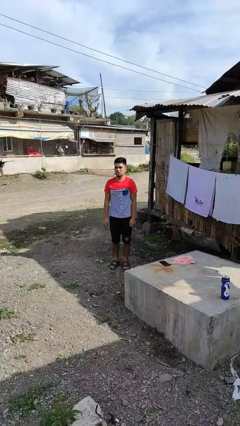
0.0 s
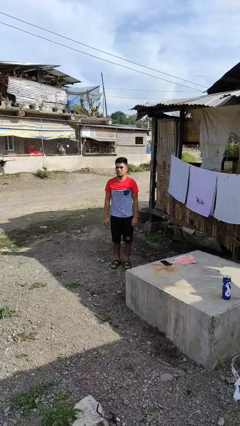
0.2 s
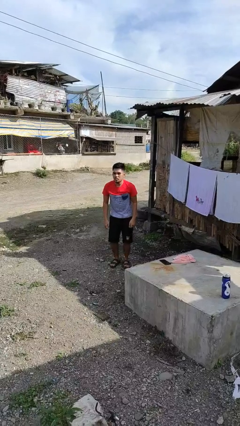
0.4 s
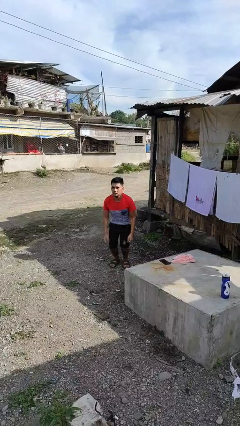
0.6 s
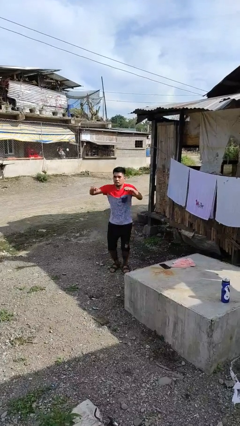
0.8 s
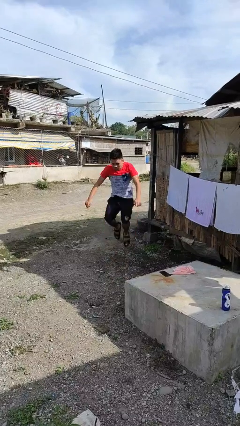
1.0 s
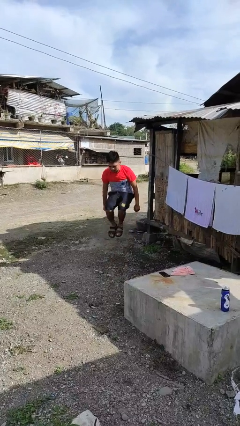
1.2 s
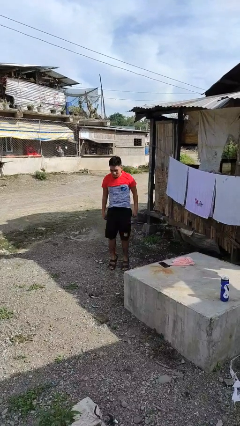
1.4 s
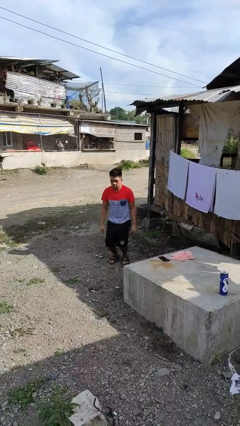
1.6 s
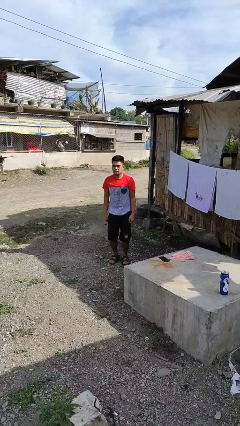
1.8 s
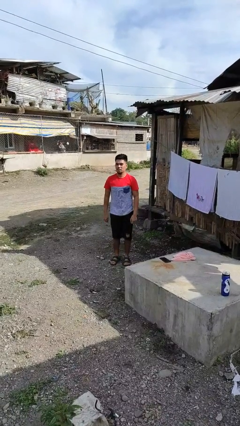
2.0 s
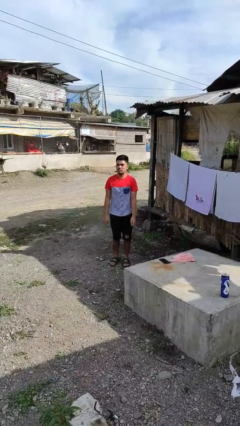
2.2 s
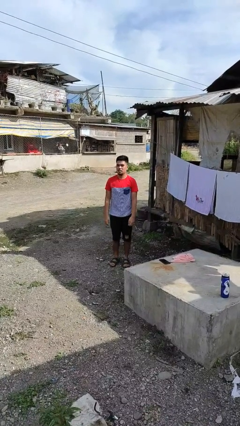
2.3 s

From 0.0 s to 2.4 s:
person jumps

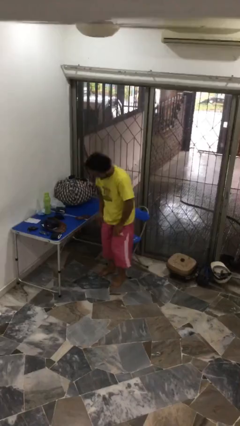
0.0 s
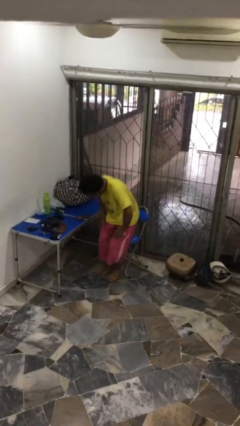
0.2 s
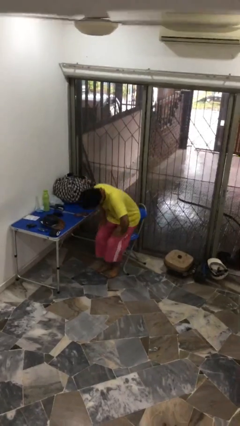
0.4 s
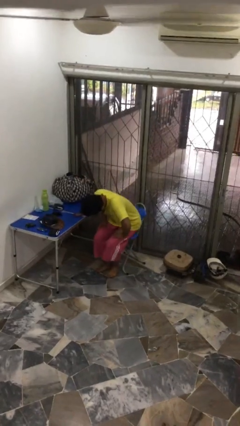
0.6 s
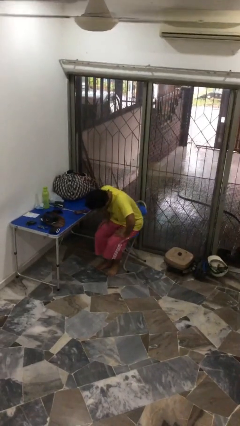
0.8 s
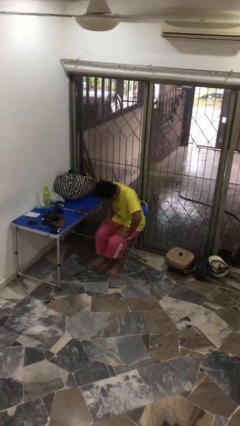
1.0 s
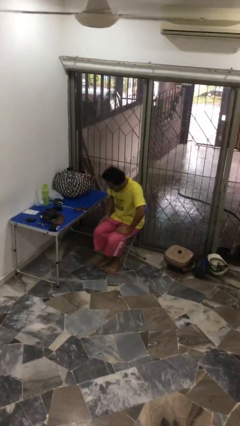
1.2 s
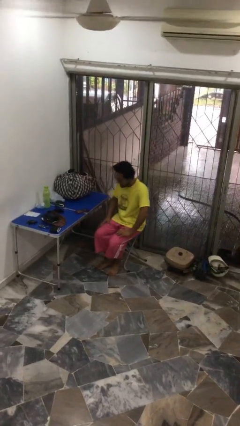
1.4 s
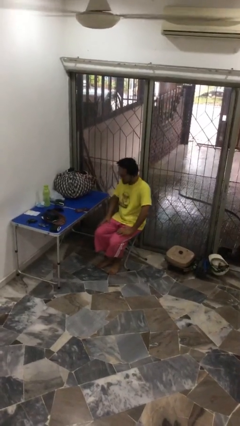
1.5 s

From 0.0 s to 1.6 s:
person sits down

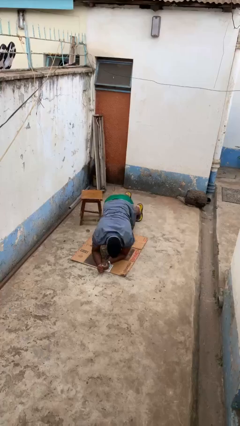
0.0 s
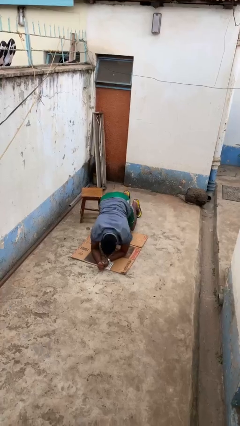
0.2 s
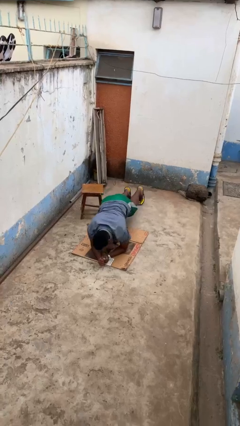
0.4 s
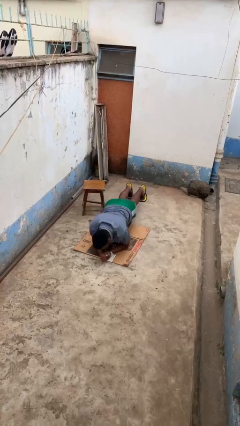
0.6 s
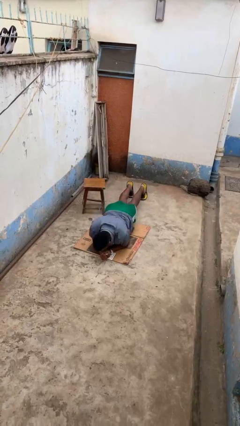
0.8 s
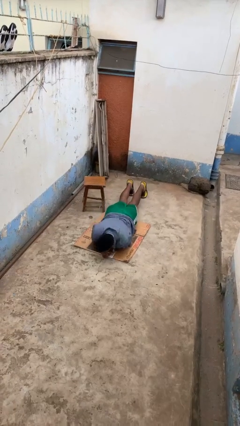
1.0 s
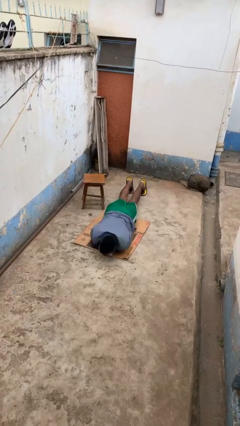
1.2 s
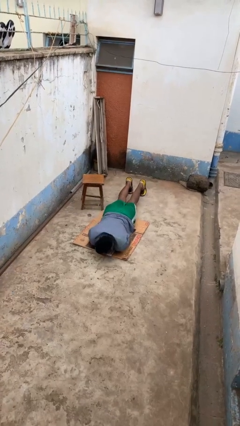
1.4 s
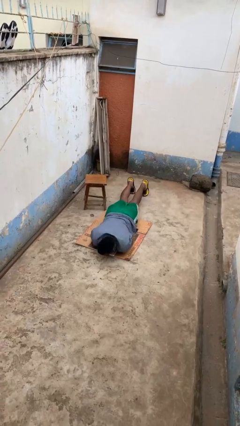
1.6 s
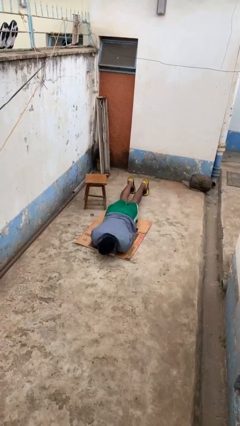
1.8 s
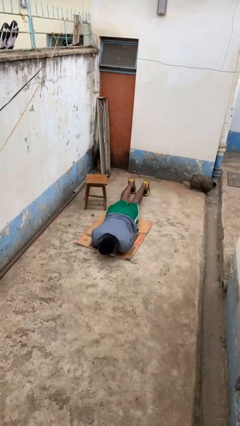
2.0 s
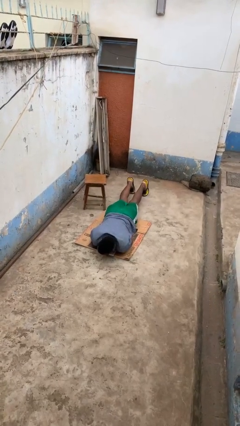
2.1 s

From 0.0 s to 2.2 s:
person lies down on floor

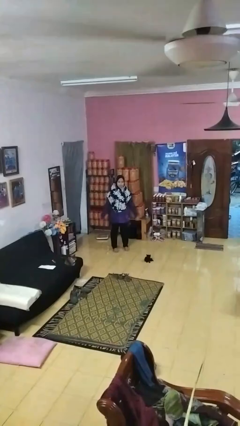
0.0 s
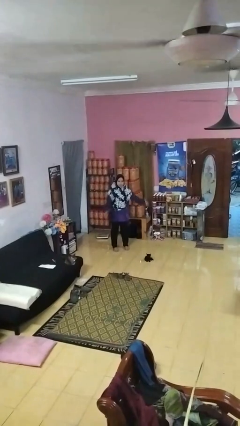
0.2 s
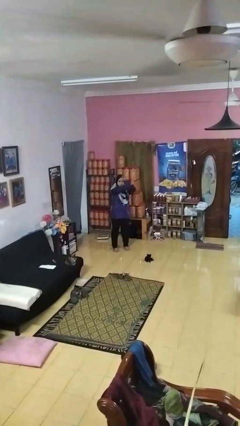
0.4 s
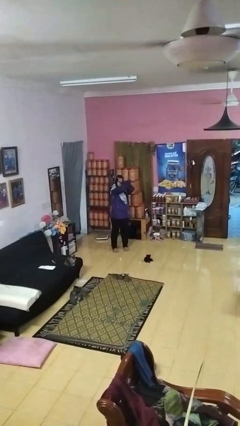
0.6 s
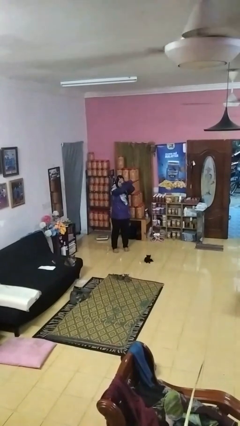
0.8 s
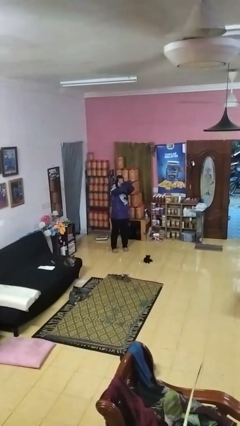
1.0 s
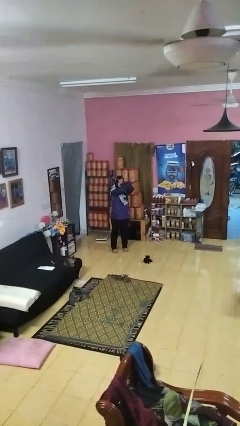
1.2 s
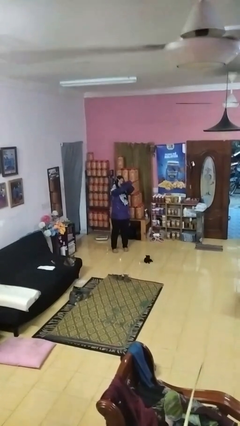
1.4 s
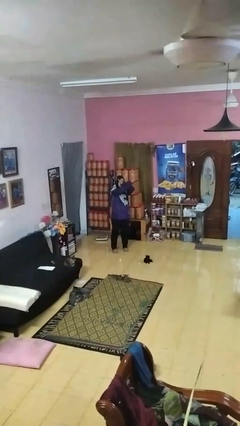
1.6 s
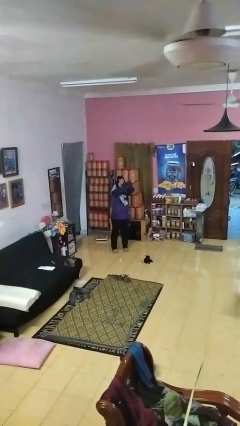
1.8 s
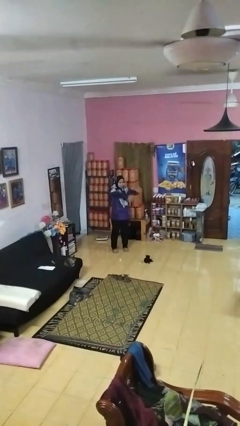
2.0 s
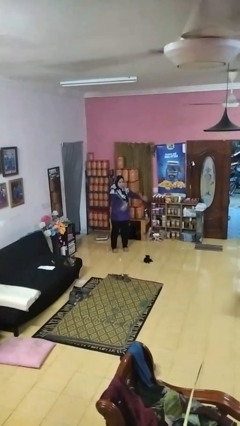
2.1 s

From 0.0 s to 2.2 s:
person gestures arms x

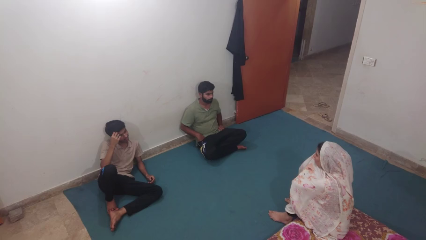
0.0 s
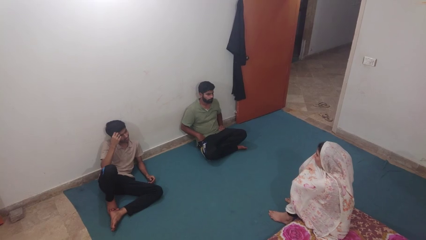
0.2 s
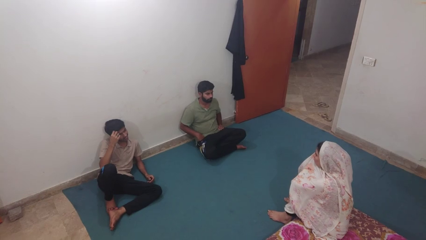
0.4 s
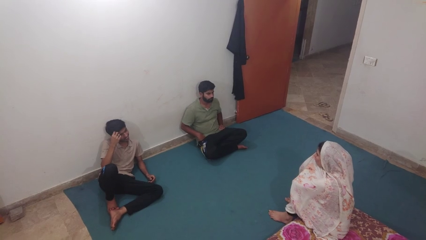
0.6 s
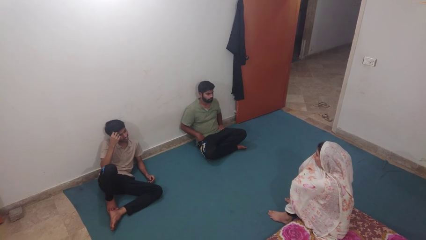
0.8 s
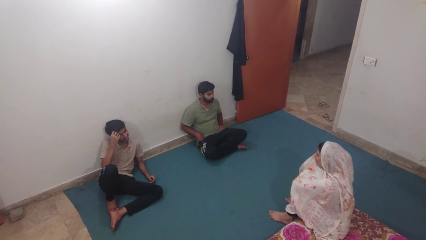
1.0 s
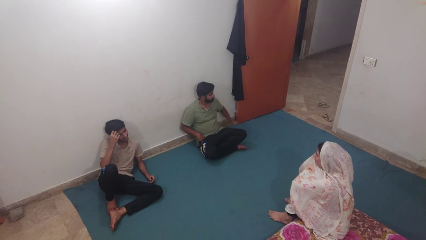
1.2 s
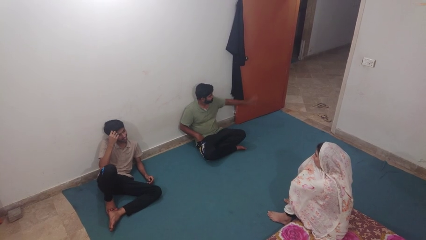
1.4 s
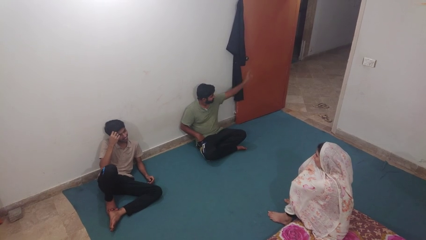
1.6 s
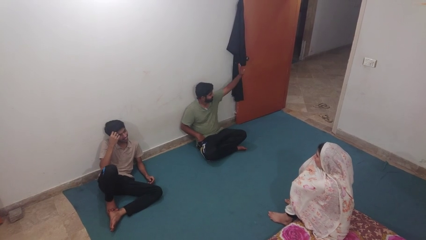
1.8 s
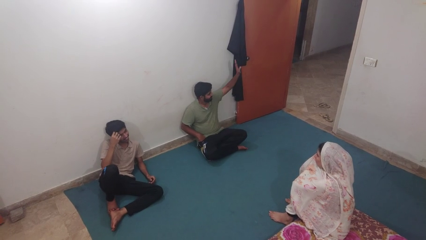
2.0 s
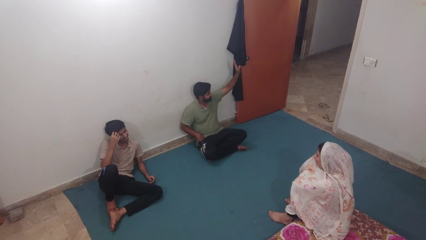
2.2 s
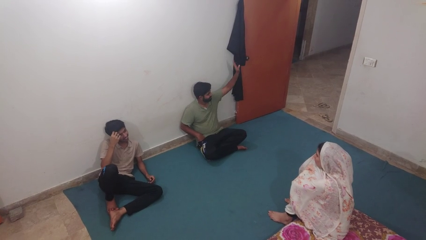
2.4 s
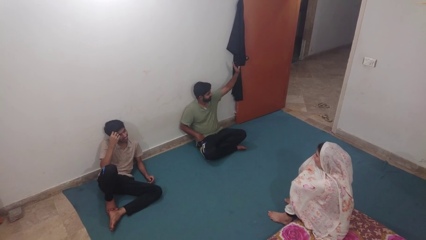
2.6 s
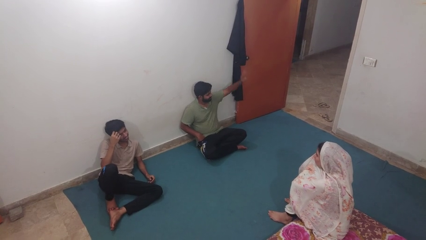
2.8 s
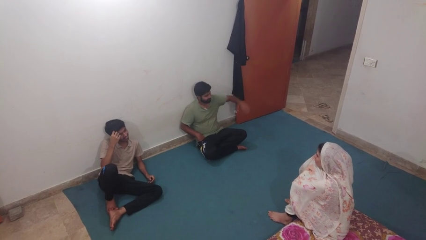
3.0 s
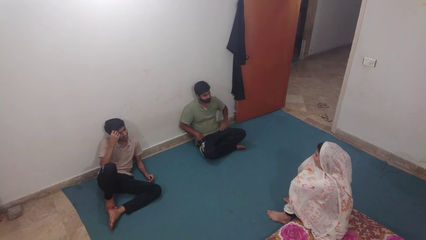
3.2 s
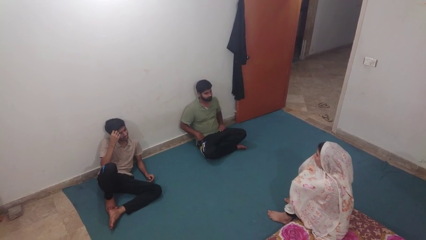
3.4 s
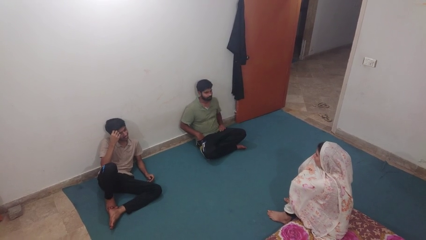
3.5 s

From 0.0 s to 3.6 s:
person waves at person

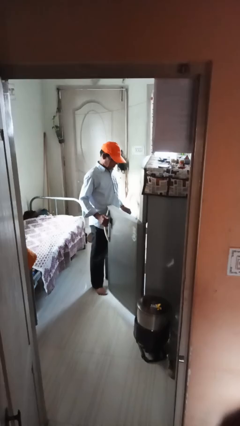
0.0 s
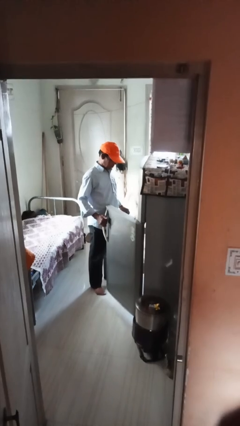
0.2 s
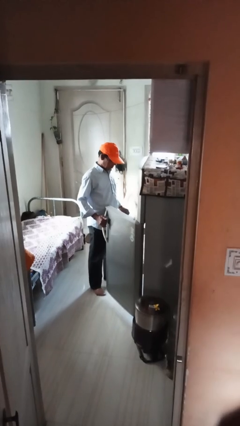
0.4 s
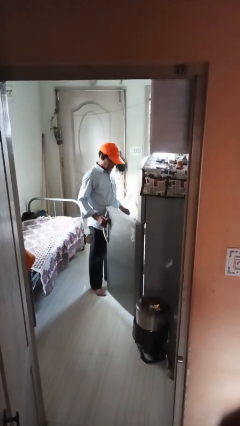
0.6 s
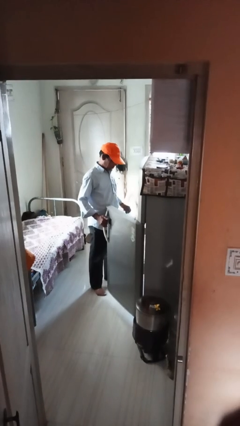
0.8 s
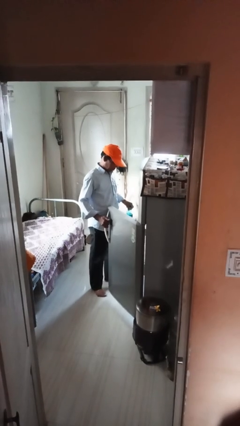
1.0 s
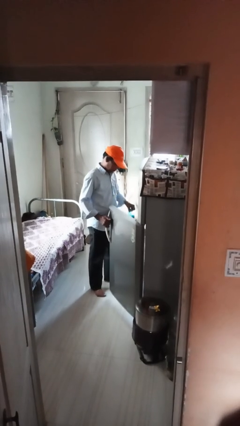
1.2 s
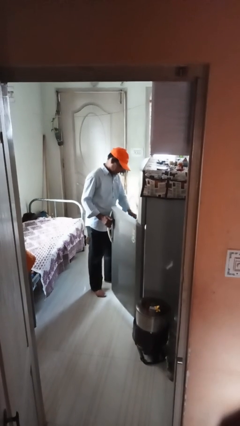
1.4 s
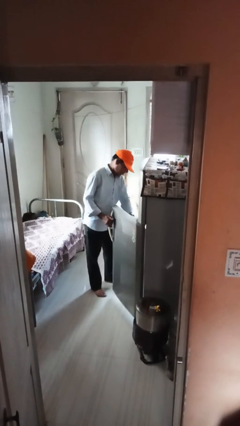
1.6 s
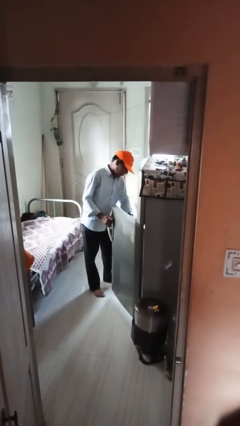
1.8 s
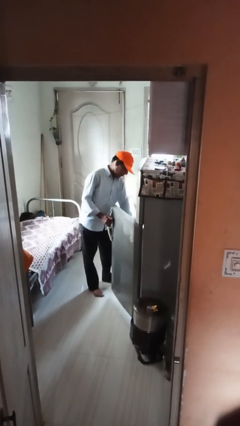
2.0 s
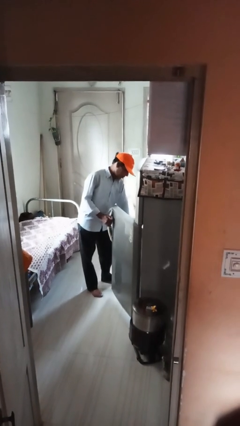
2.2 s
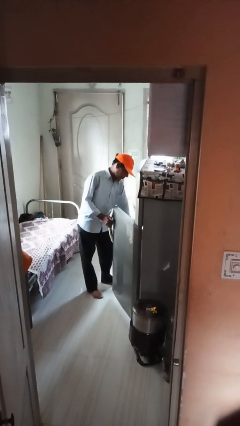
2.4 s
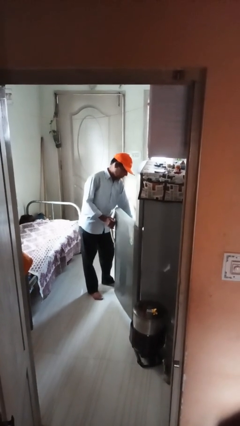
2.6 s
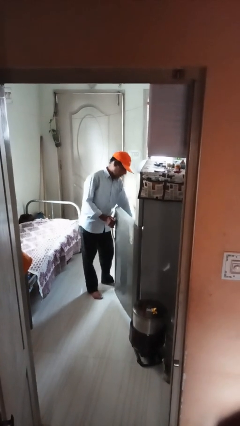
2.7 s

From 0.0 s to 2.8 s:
person puts object into refrigerator

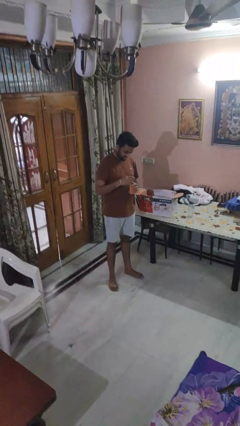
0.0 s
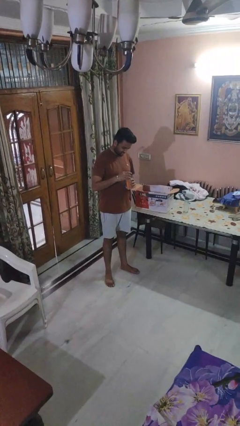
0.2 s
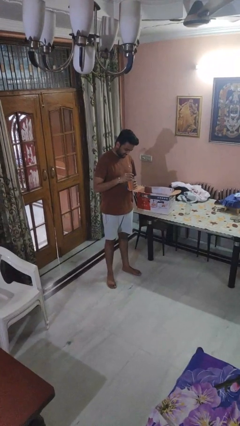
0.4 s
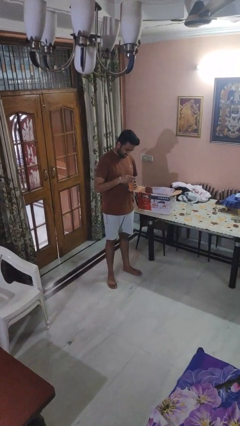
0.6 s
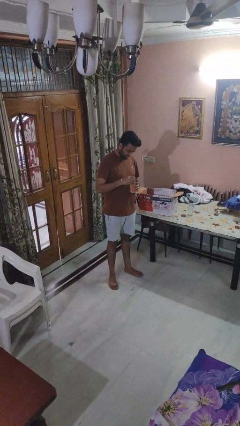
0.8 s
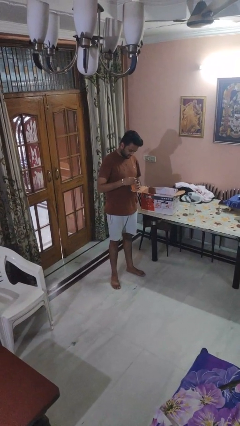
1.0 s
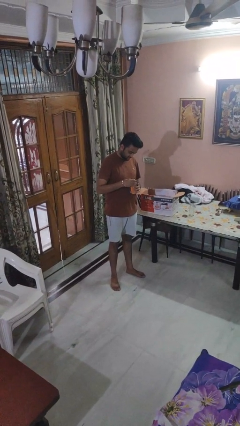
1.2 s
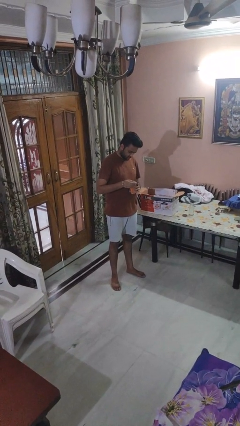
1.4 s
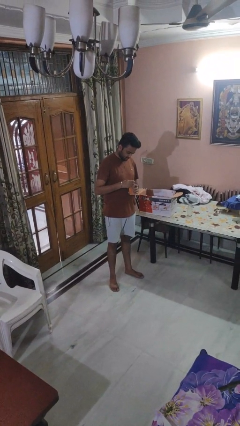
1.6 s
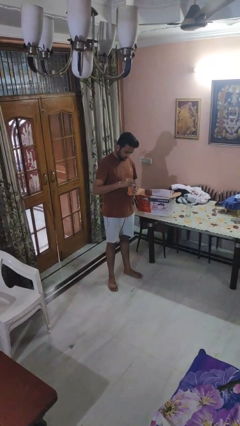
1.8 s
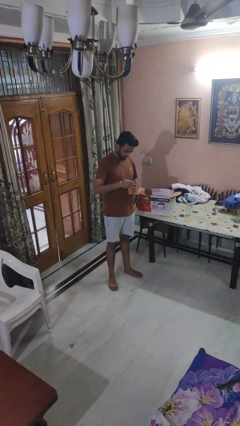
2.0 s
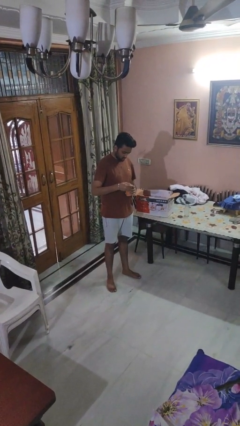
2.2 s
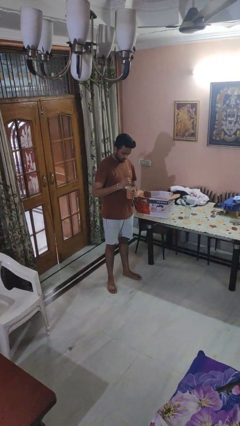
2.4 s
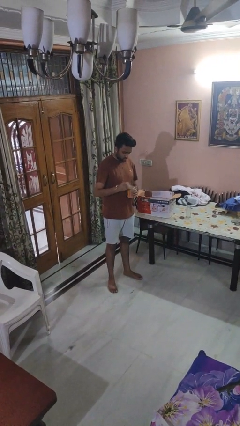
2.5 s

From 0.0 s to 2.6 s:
person opens can with can opener
